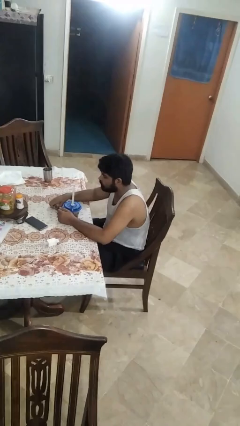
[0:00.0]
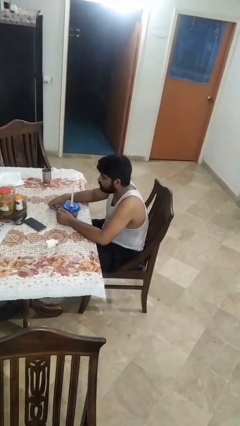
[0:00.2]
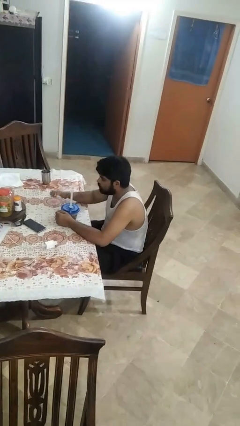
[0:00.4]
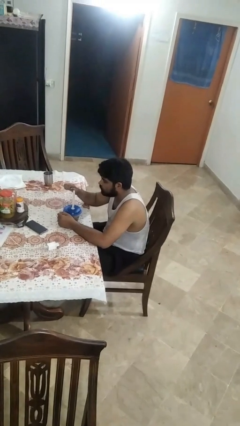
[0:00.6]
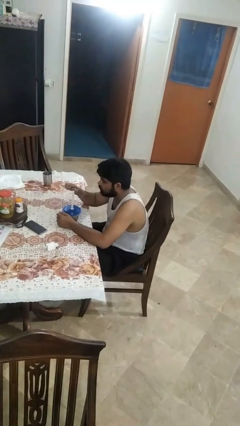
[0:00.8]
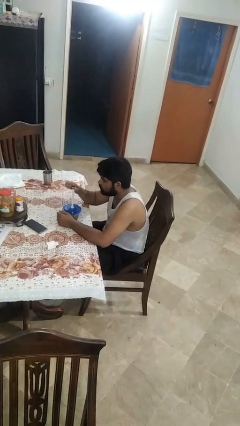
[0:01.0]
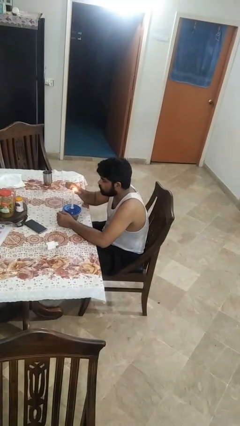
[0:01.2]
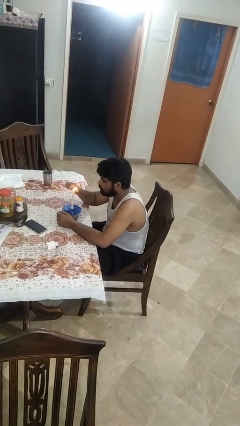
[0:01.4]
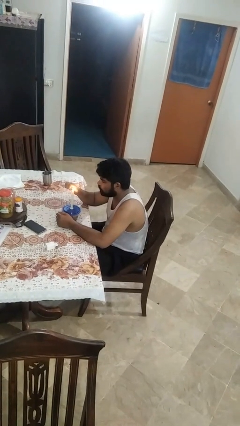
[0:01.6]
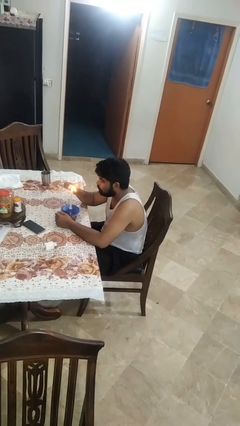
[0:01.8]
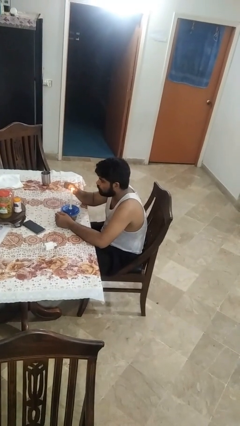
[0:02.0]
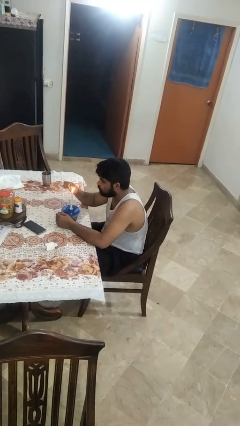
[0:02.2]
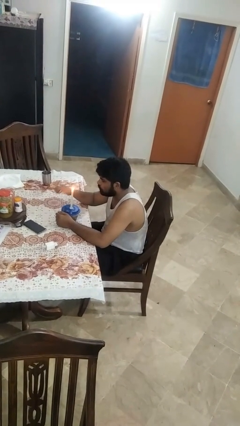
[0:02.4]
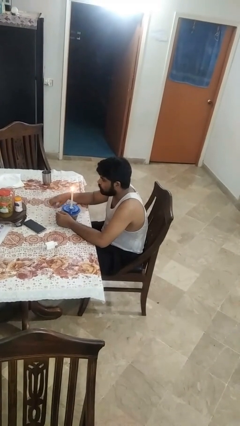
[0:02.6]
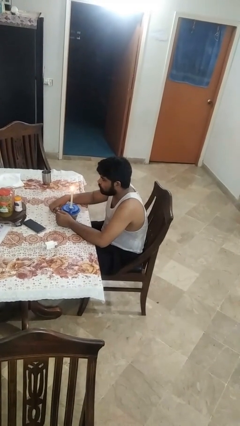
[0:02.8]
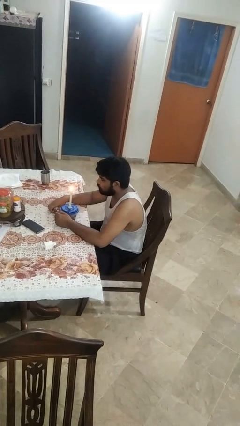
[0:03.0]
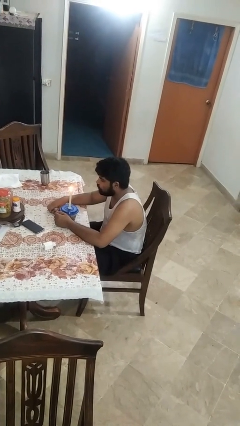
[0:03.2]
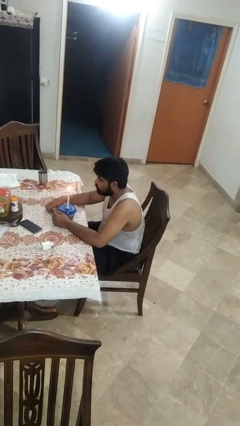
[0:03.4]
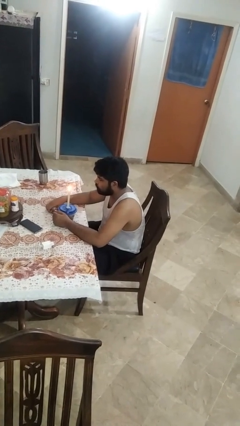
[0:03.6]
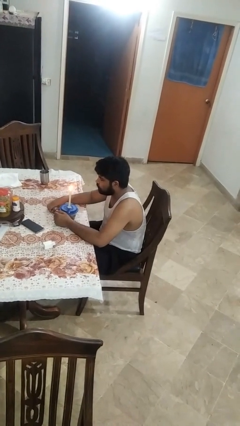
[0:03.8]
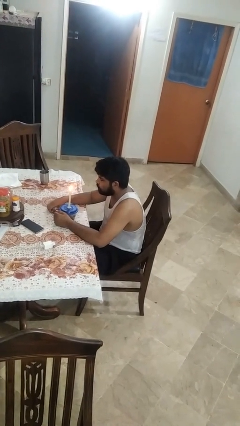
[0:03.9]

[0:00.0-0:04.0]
person lights candle

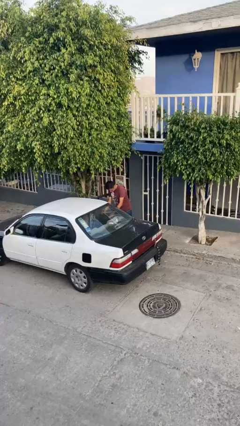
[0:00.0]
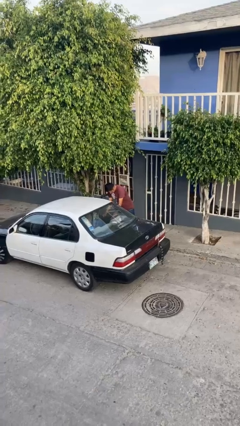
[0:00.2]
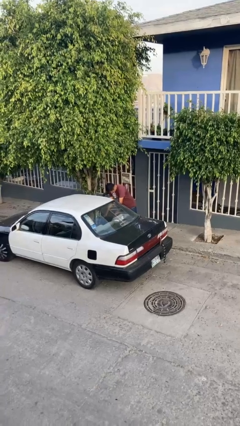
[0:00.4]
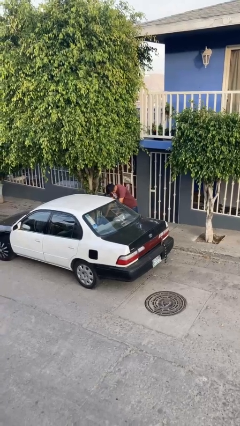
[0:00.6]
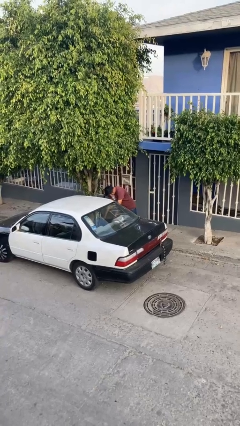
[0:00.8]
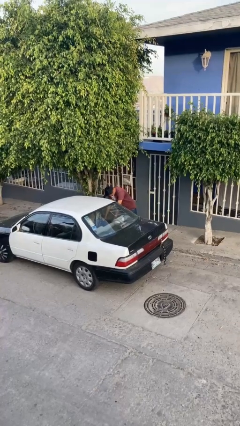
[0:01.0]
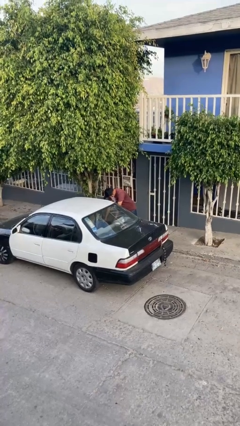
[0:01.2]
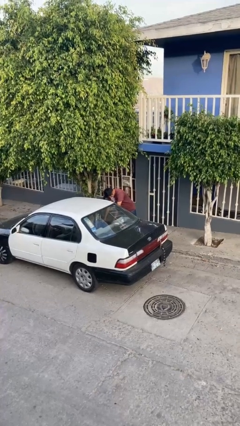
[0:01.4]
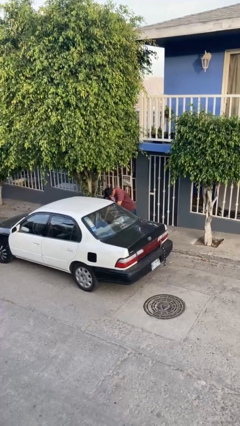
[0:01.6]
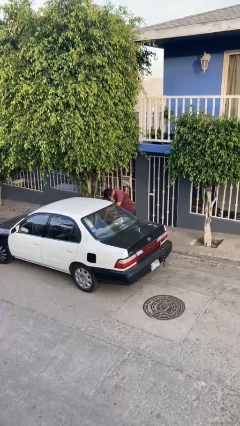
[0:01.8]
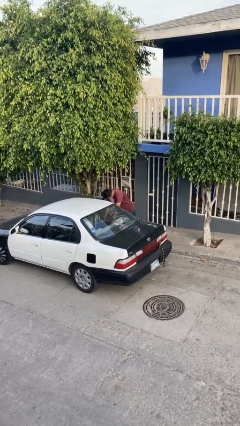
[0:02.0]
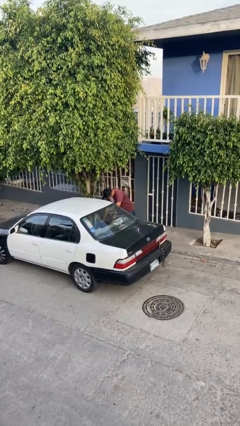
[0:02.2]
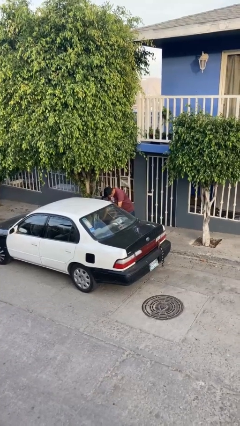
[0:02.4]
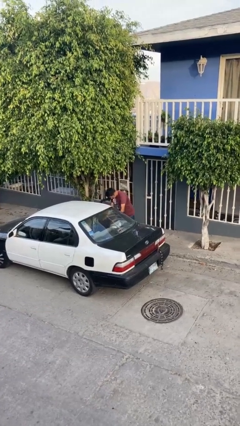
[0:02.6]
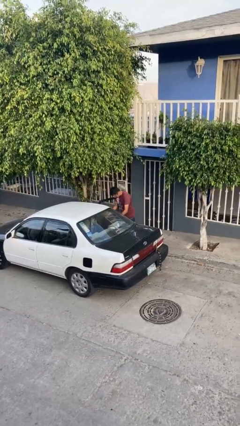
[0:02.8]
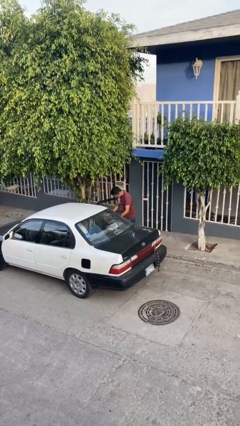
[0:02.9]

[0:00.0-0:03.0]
person loads car

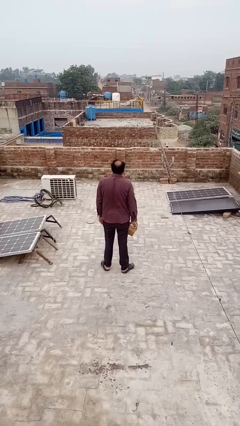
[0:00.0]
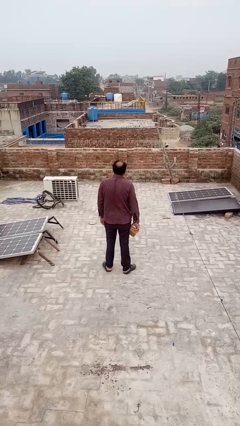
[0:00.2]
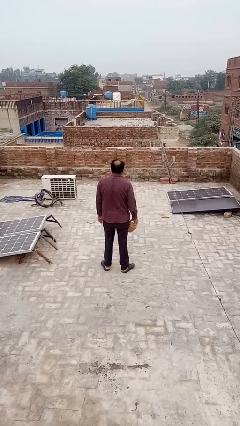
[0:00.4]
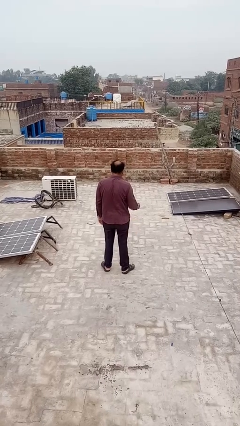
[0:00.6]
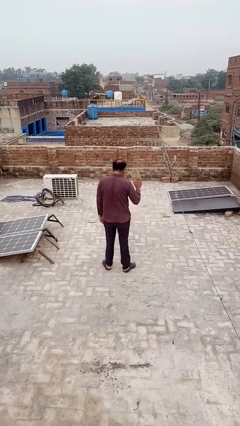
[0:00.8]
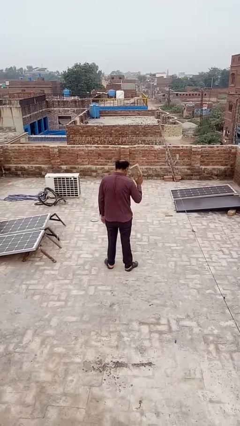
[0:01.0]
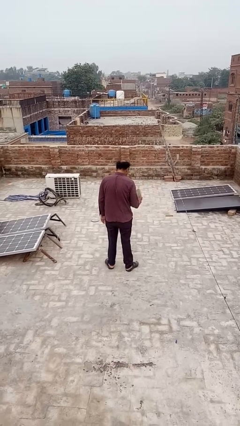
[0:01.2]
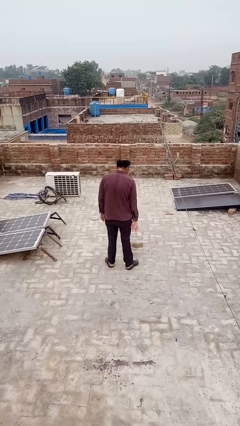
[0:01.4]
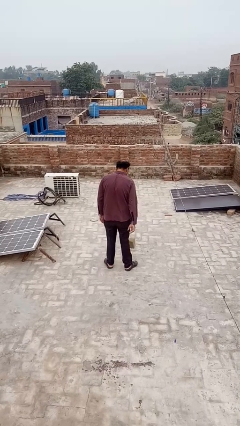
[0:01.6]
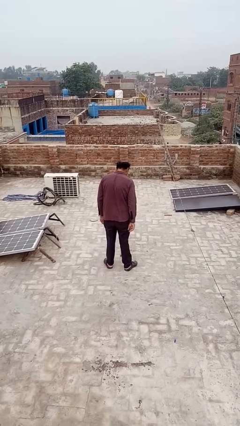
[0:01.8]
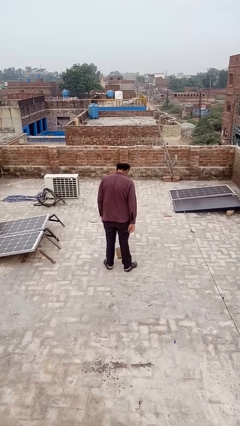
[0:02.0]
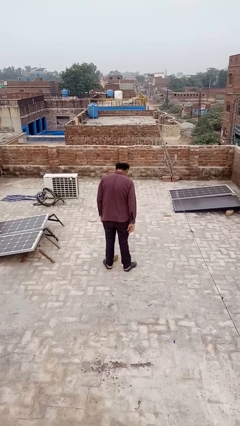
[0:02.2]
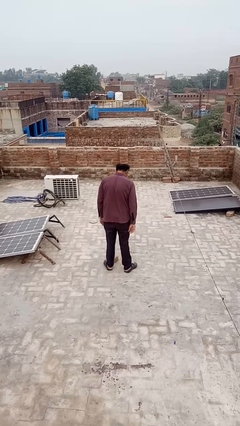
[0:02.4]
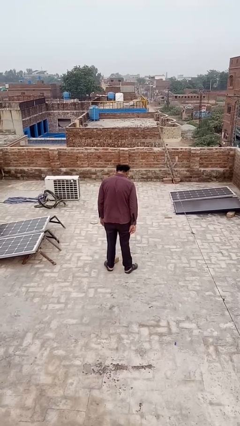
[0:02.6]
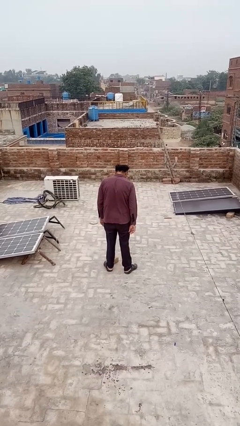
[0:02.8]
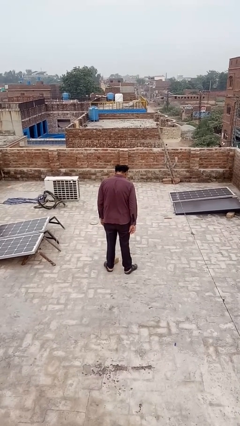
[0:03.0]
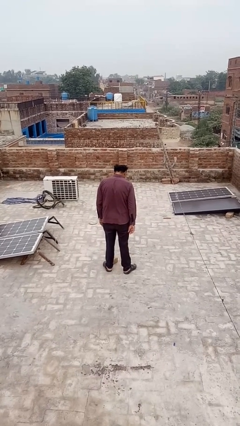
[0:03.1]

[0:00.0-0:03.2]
person throws object to ground

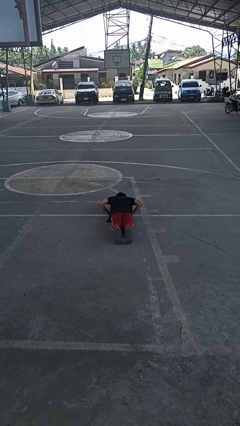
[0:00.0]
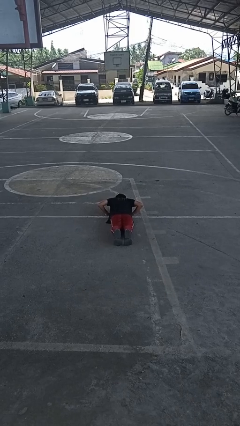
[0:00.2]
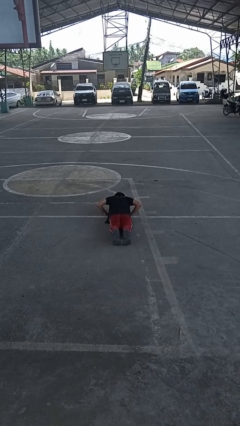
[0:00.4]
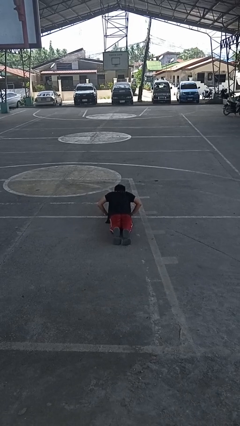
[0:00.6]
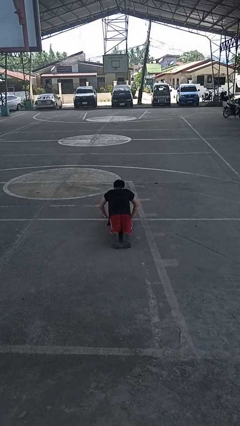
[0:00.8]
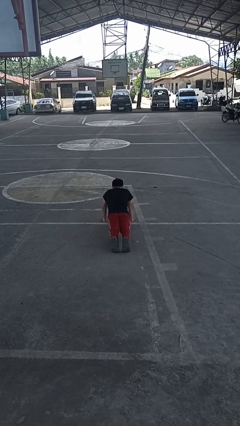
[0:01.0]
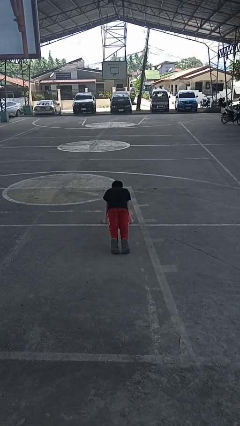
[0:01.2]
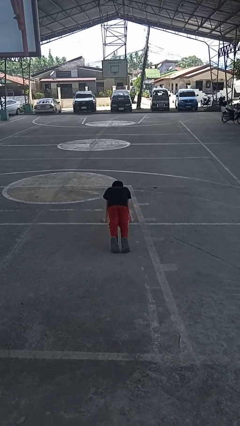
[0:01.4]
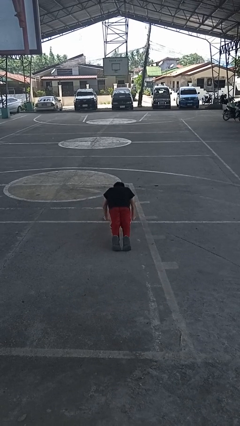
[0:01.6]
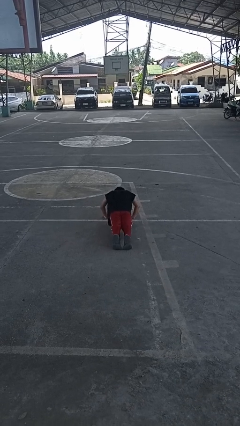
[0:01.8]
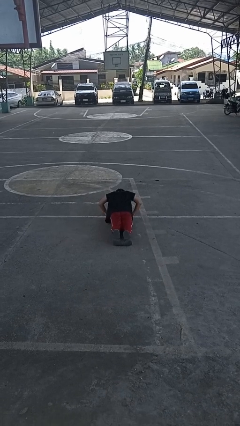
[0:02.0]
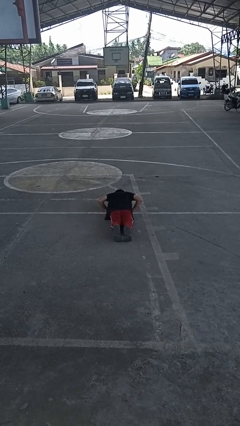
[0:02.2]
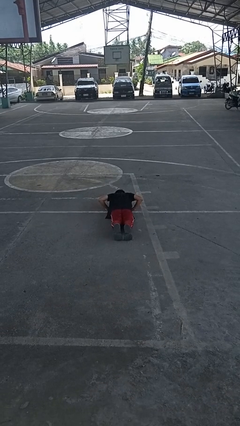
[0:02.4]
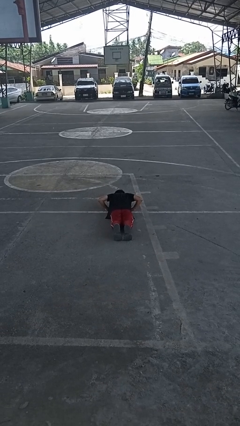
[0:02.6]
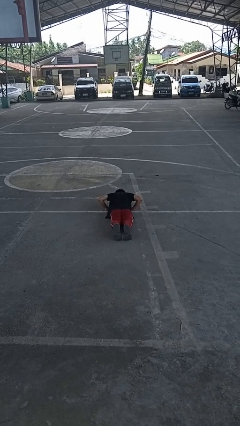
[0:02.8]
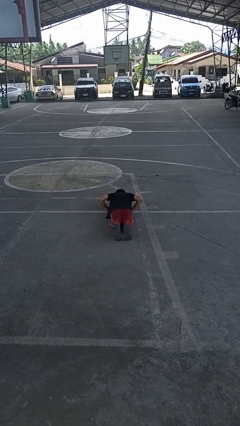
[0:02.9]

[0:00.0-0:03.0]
person exercises with pushup

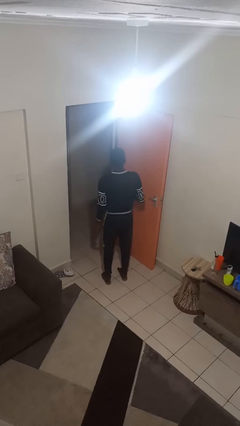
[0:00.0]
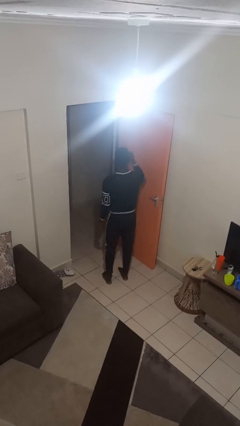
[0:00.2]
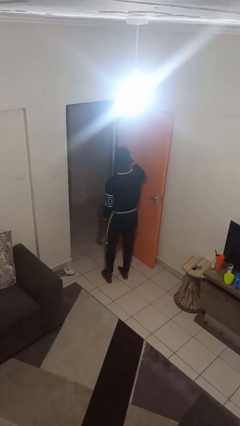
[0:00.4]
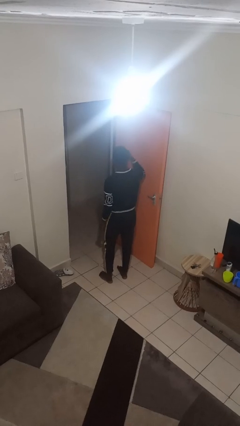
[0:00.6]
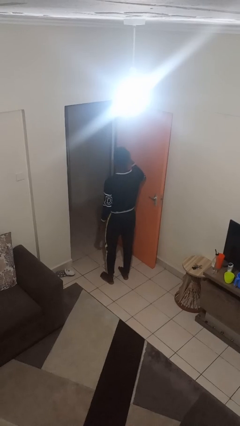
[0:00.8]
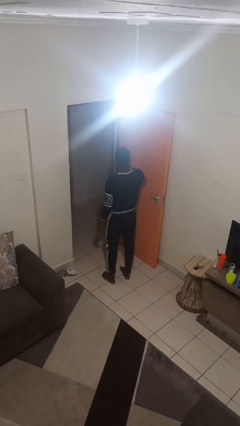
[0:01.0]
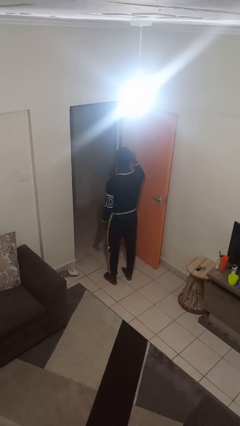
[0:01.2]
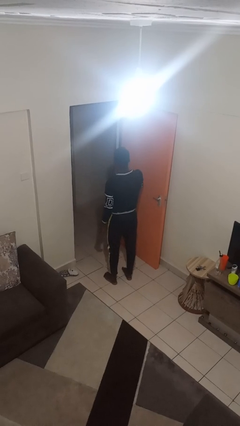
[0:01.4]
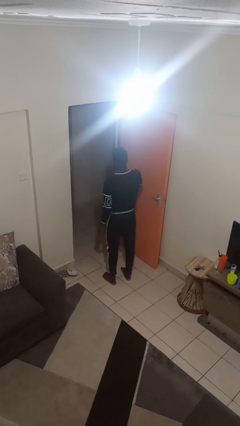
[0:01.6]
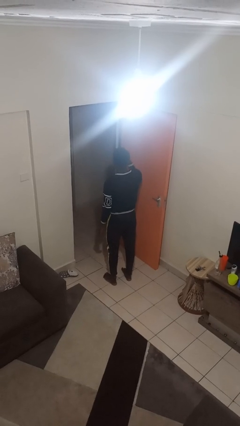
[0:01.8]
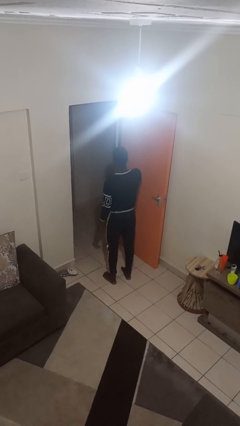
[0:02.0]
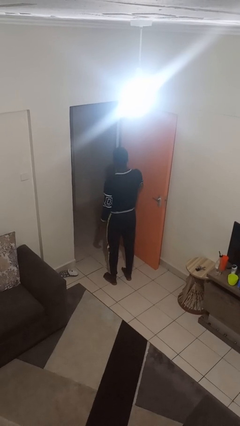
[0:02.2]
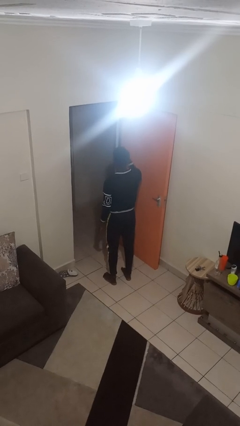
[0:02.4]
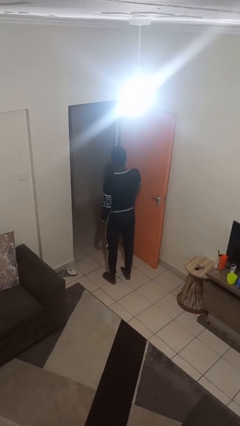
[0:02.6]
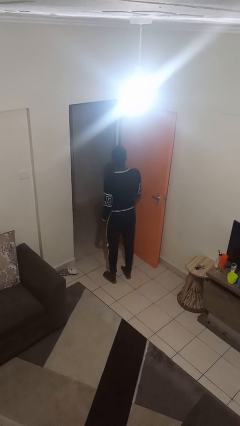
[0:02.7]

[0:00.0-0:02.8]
person snaps fingers

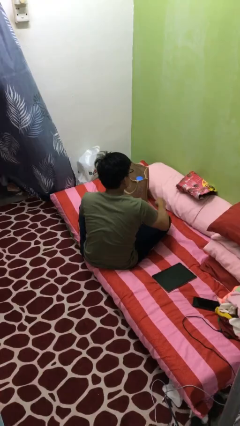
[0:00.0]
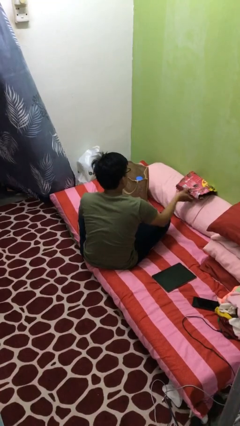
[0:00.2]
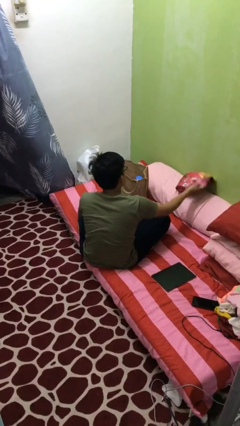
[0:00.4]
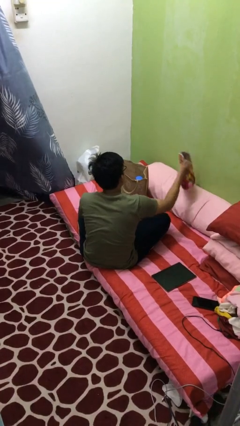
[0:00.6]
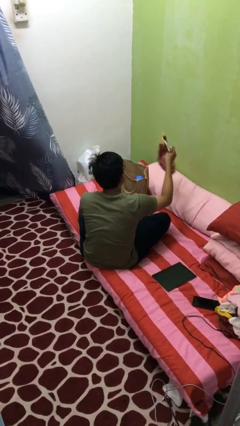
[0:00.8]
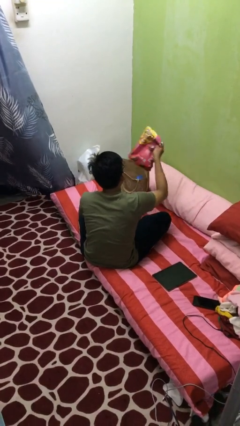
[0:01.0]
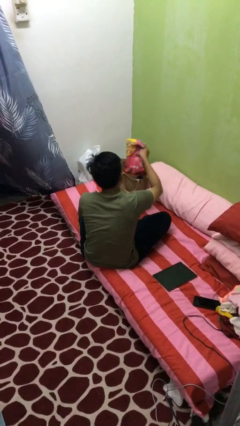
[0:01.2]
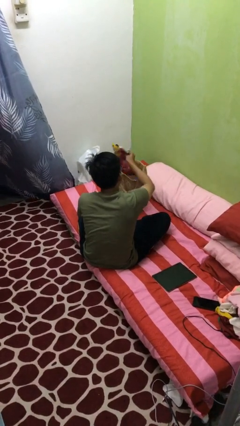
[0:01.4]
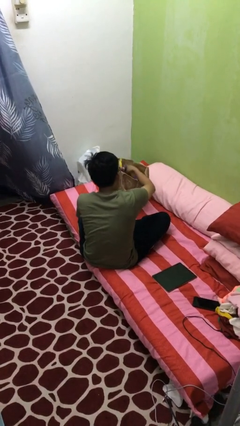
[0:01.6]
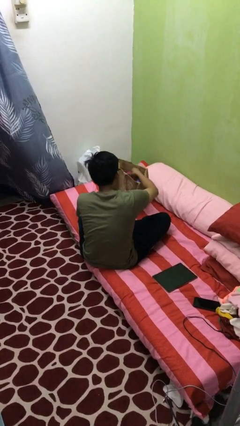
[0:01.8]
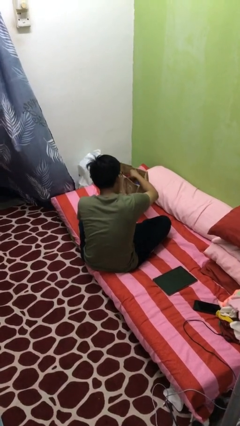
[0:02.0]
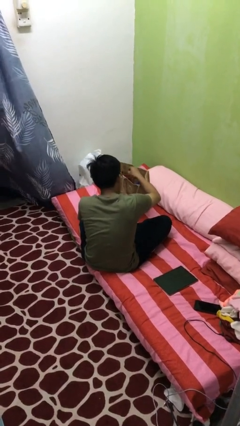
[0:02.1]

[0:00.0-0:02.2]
person puts object into bag
